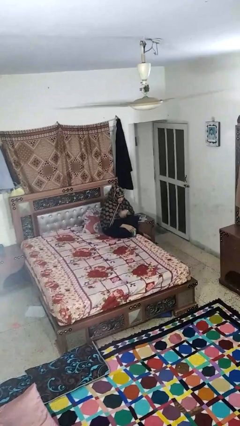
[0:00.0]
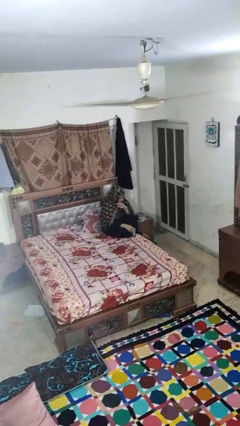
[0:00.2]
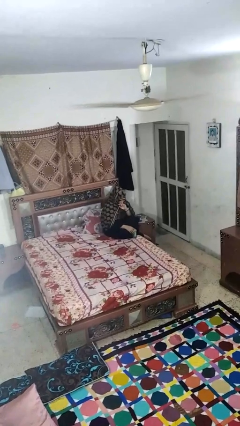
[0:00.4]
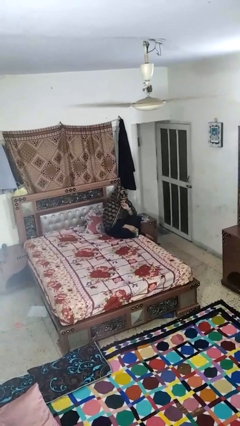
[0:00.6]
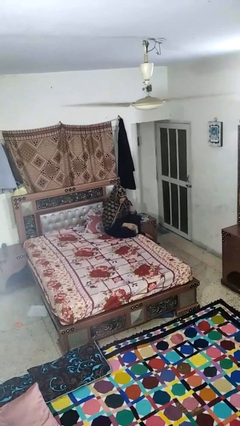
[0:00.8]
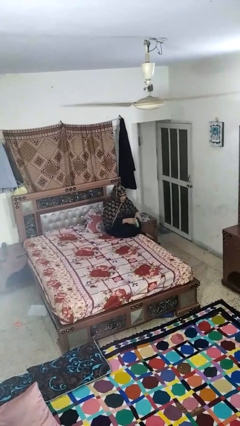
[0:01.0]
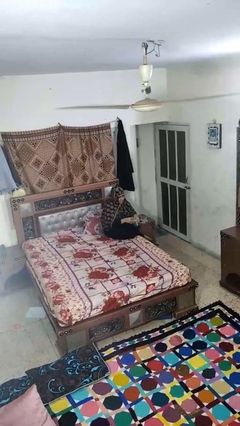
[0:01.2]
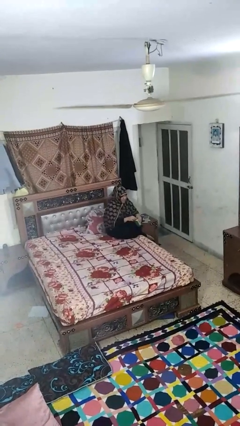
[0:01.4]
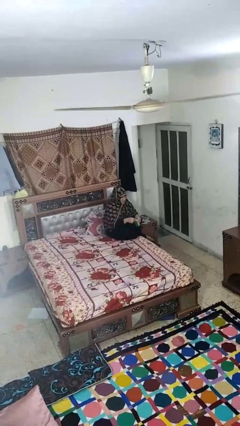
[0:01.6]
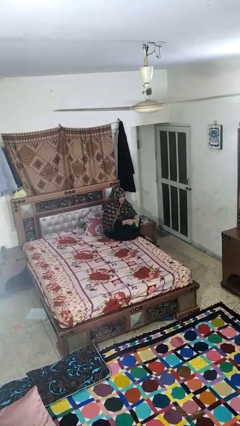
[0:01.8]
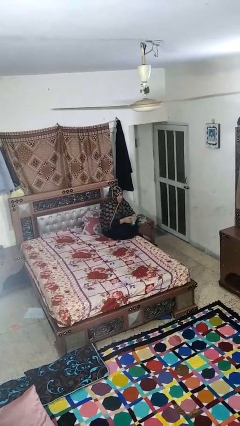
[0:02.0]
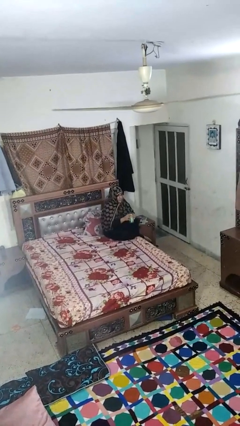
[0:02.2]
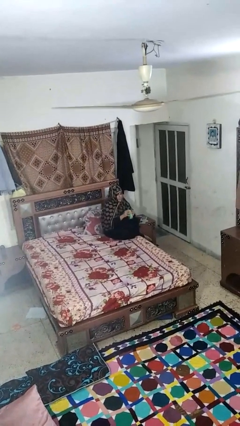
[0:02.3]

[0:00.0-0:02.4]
person opens beverage can

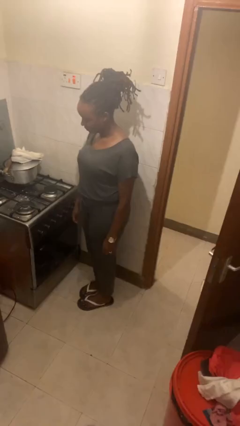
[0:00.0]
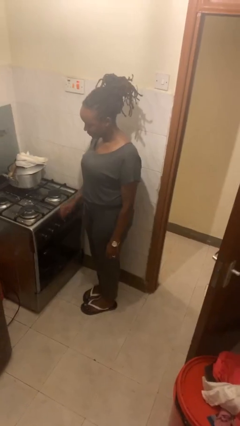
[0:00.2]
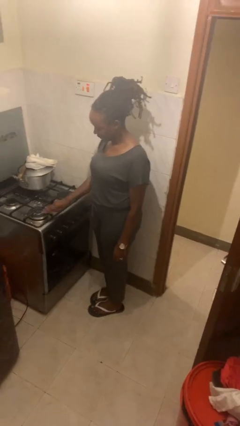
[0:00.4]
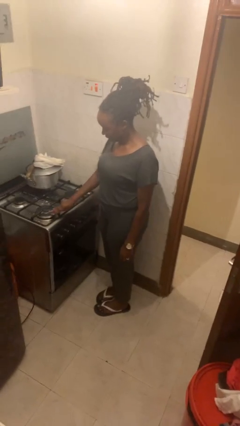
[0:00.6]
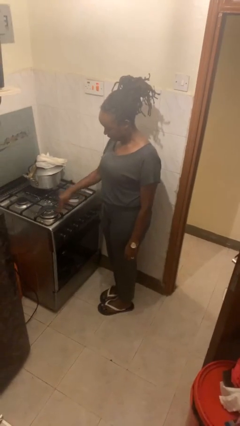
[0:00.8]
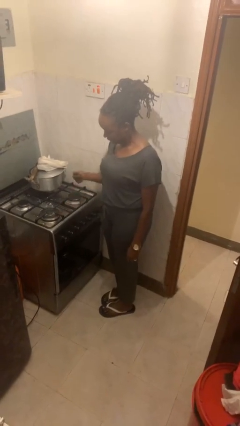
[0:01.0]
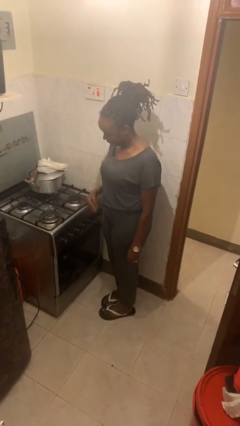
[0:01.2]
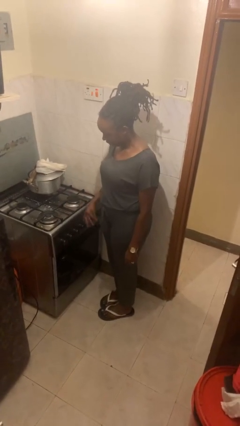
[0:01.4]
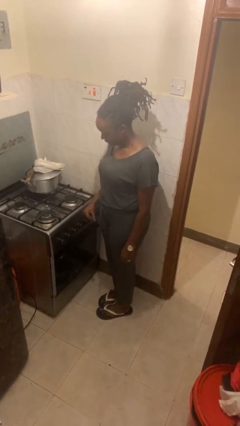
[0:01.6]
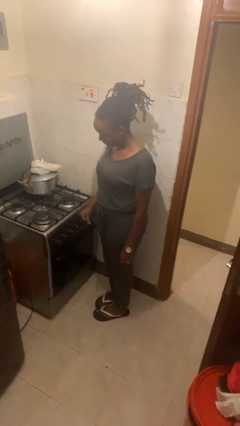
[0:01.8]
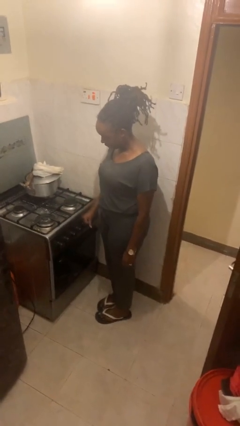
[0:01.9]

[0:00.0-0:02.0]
person burns hand

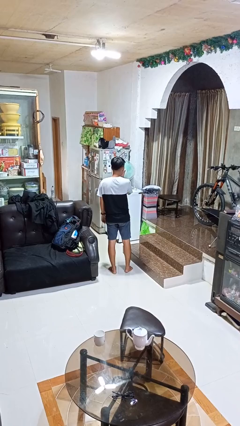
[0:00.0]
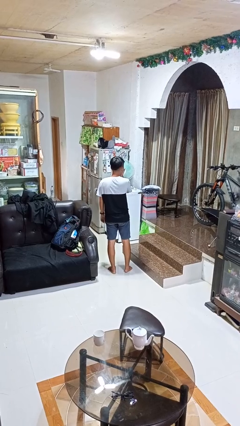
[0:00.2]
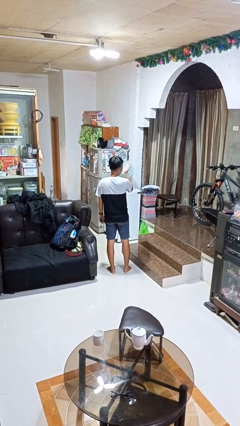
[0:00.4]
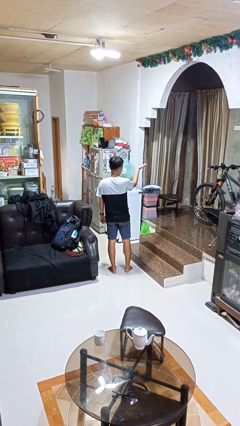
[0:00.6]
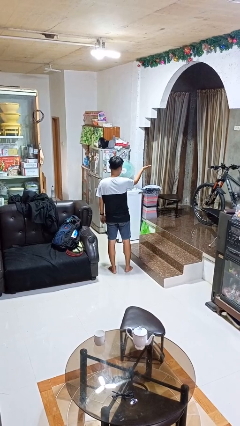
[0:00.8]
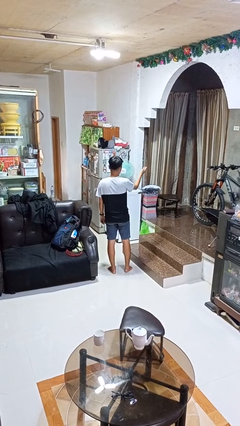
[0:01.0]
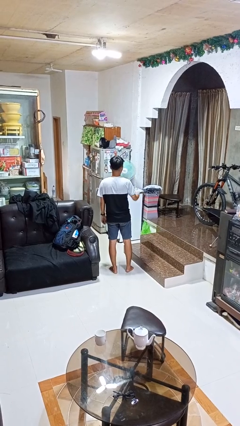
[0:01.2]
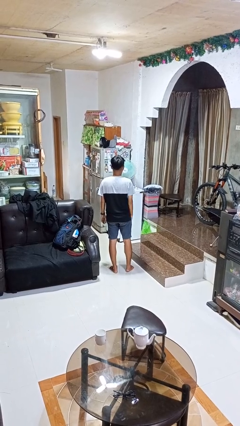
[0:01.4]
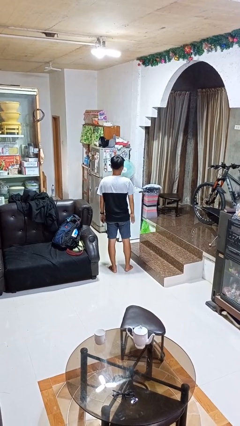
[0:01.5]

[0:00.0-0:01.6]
person gestures blow kiss

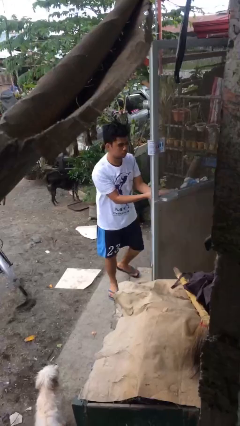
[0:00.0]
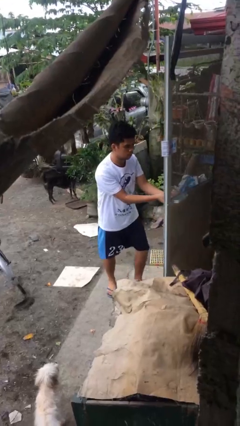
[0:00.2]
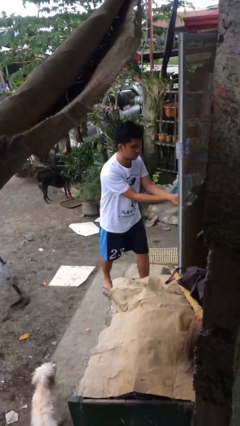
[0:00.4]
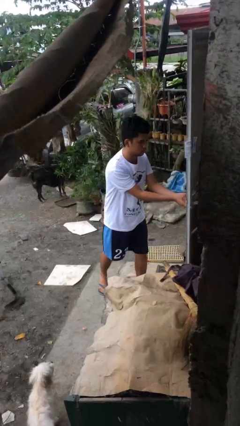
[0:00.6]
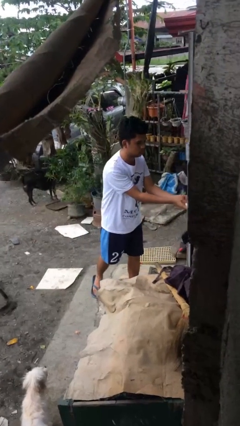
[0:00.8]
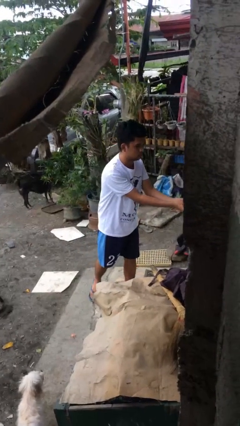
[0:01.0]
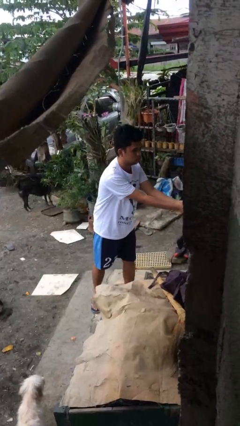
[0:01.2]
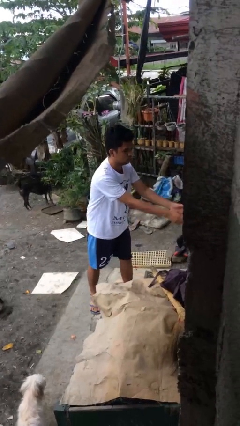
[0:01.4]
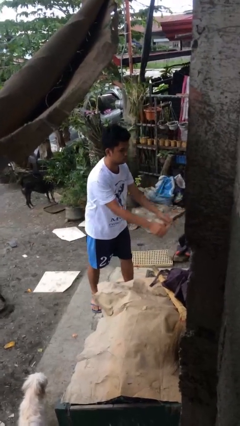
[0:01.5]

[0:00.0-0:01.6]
person closes facility door

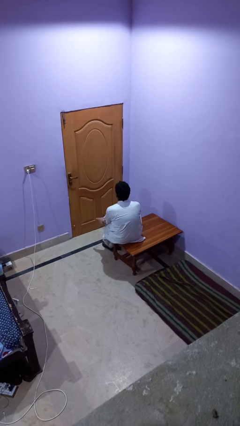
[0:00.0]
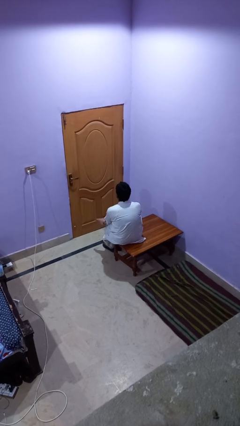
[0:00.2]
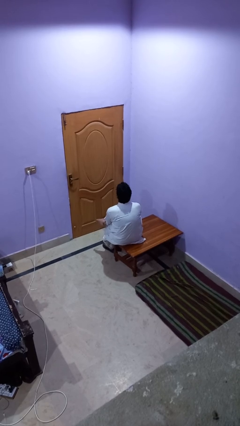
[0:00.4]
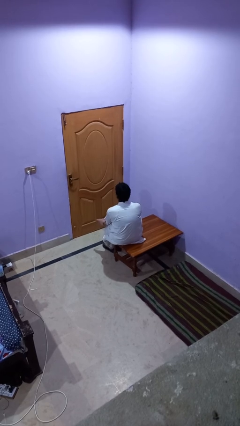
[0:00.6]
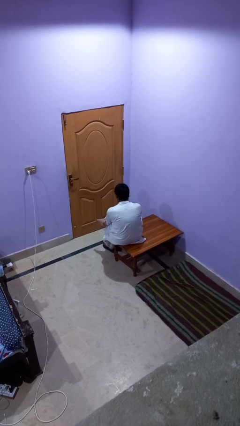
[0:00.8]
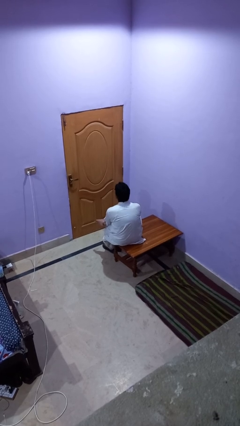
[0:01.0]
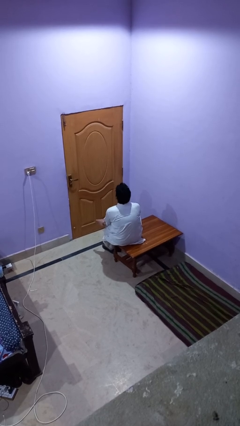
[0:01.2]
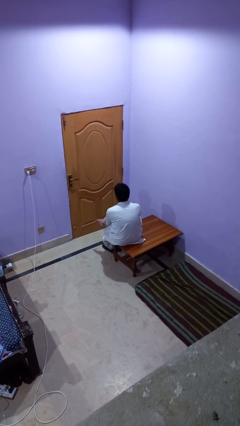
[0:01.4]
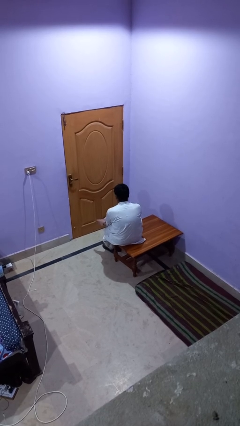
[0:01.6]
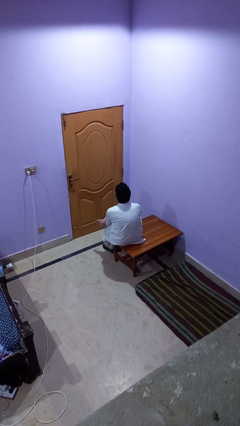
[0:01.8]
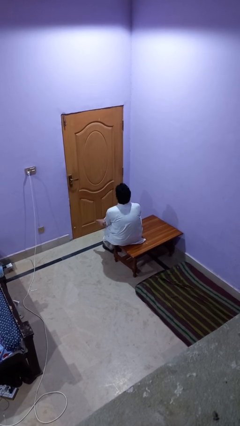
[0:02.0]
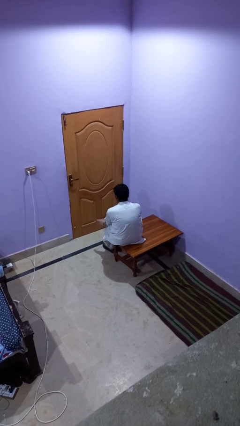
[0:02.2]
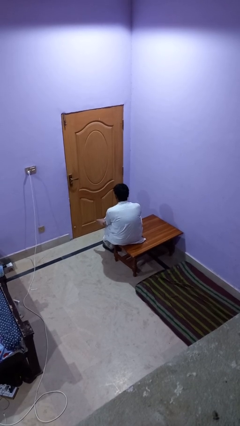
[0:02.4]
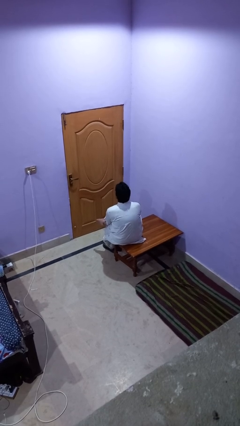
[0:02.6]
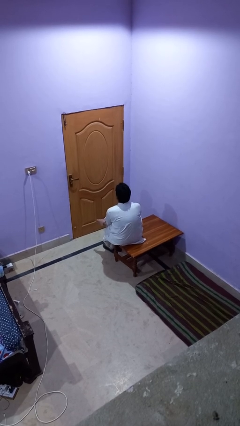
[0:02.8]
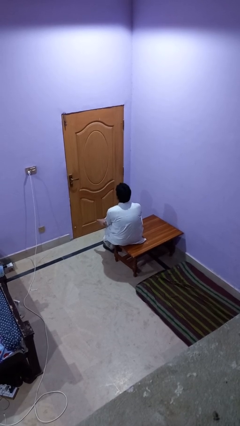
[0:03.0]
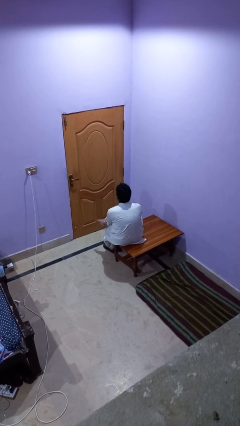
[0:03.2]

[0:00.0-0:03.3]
person nods head

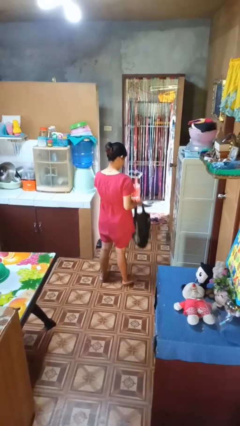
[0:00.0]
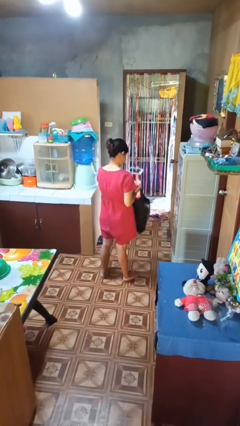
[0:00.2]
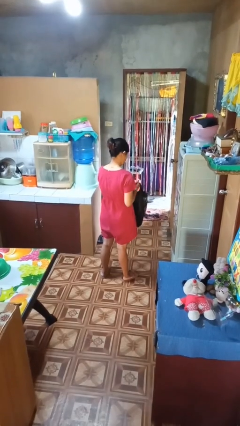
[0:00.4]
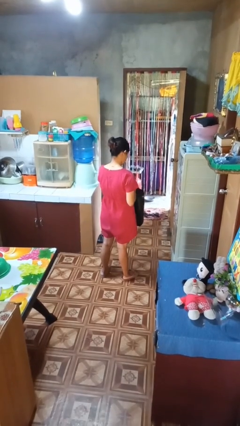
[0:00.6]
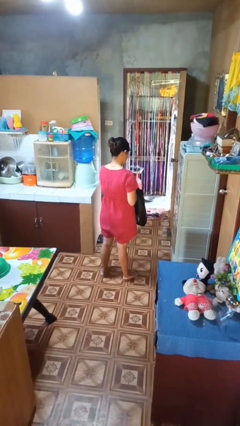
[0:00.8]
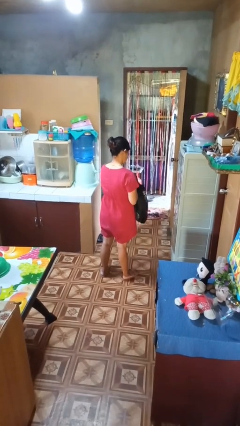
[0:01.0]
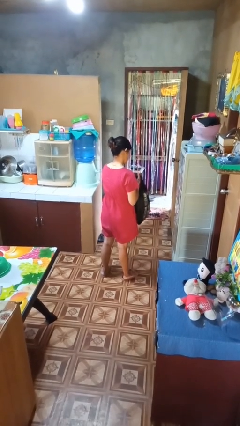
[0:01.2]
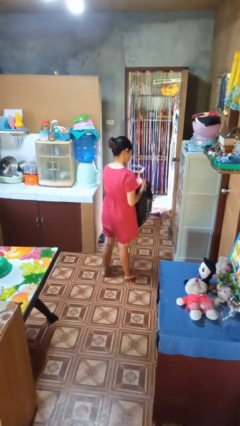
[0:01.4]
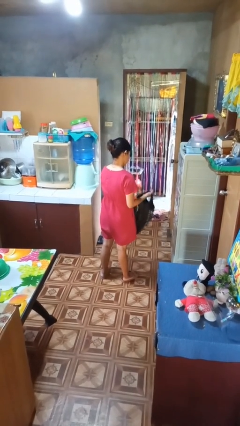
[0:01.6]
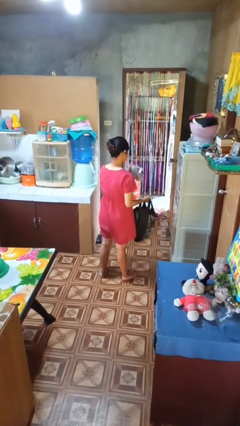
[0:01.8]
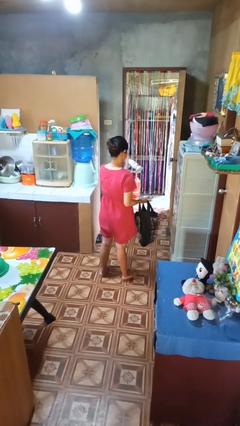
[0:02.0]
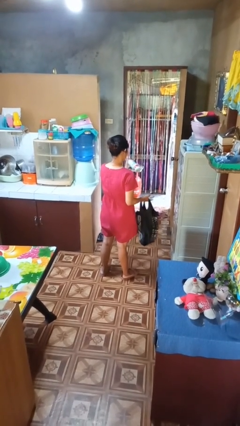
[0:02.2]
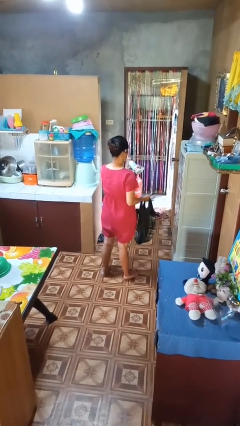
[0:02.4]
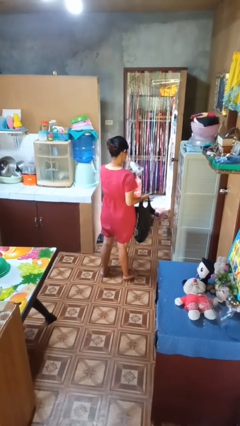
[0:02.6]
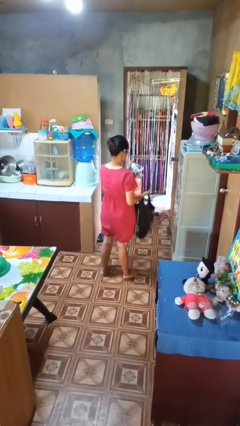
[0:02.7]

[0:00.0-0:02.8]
person takes object from bag

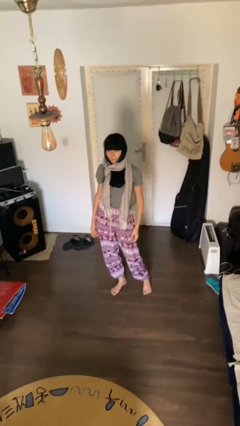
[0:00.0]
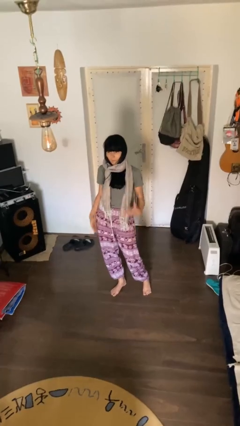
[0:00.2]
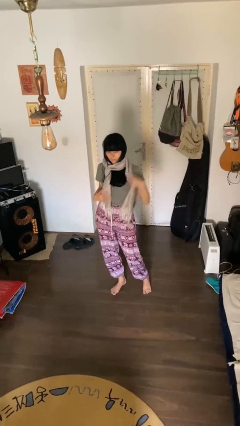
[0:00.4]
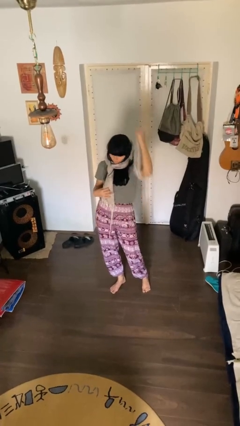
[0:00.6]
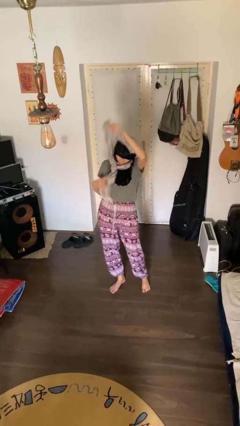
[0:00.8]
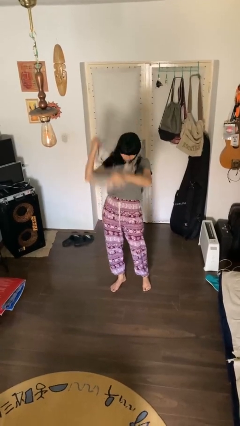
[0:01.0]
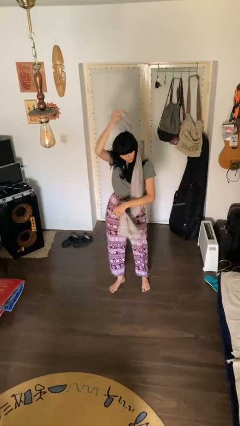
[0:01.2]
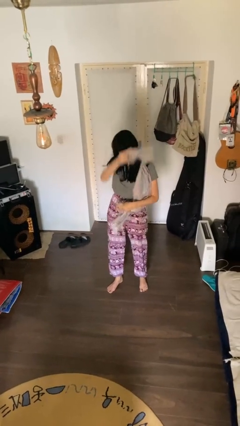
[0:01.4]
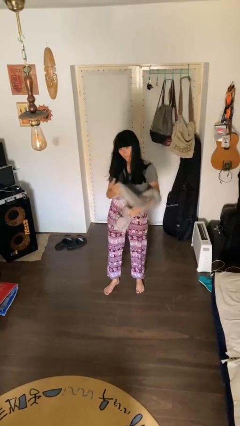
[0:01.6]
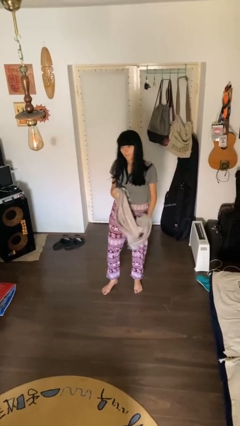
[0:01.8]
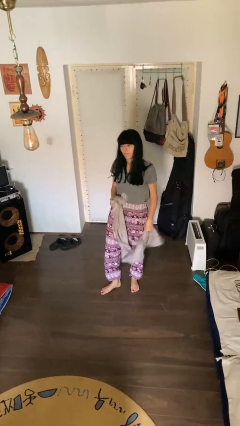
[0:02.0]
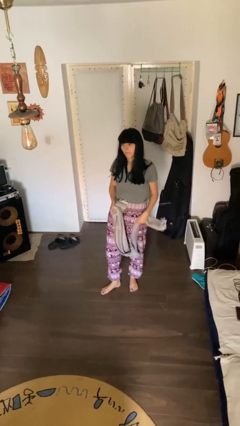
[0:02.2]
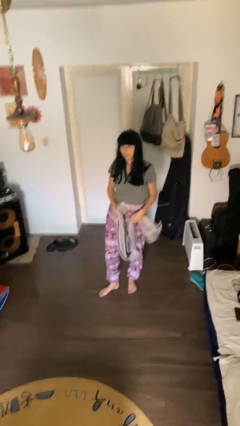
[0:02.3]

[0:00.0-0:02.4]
person takes off scarf

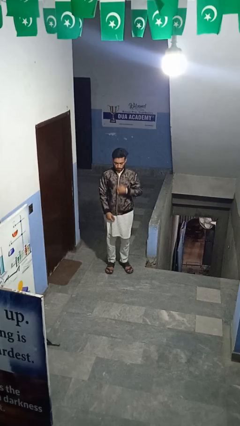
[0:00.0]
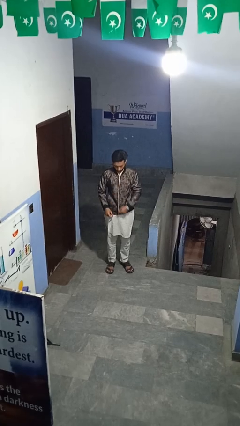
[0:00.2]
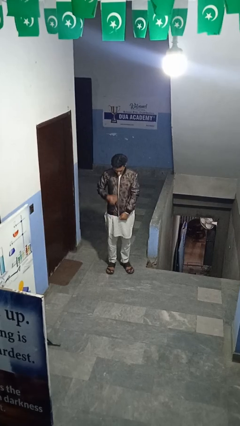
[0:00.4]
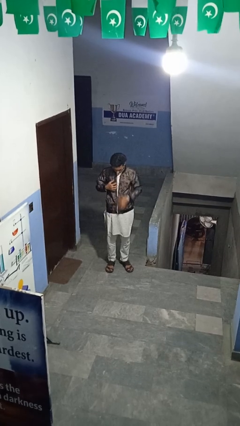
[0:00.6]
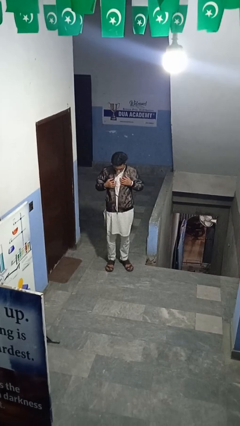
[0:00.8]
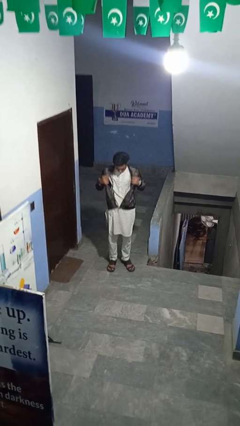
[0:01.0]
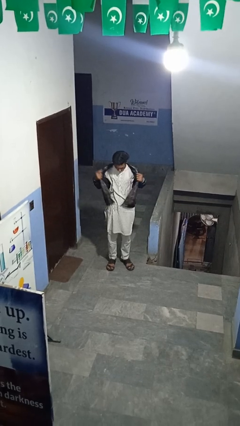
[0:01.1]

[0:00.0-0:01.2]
person unzips jacket
